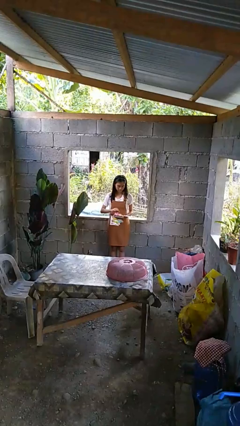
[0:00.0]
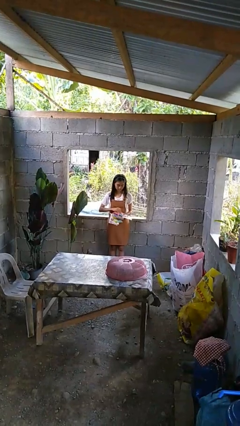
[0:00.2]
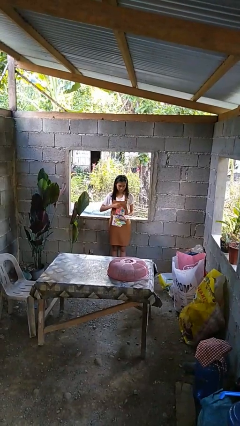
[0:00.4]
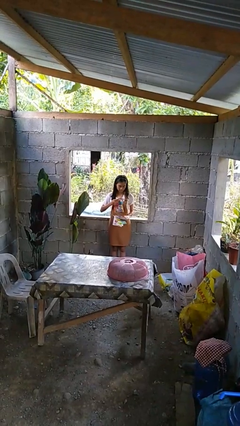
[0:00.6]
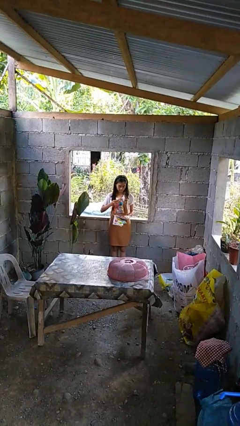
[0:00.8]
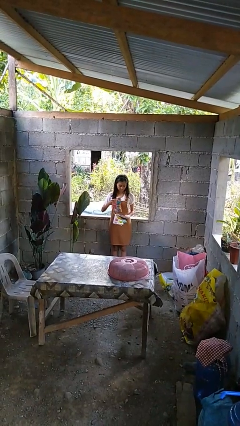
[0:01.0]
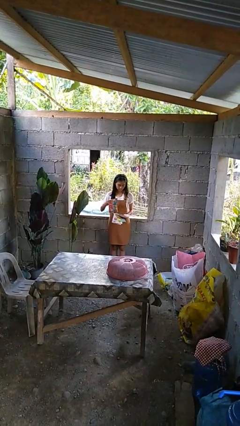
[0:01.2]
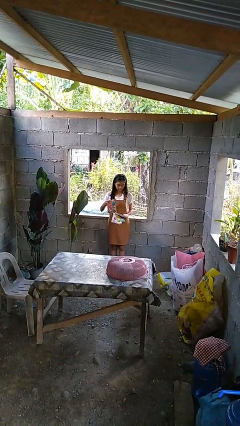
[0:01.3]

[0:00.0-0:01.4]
person tears paper

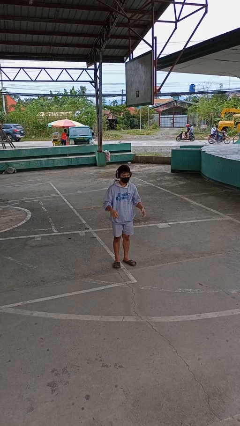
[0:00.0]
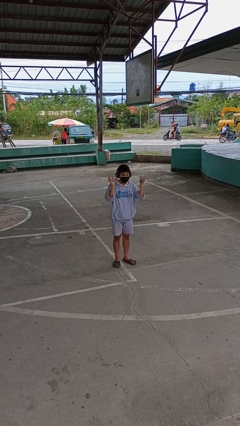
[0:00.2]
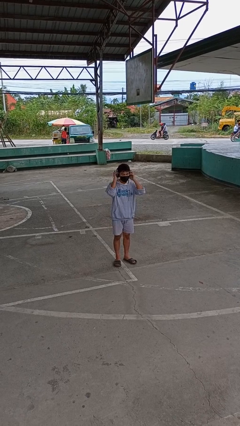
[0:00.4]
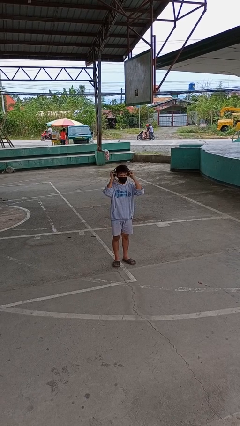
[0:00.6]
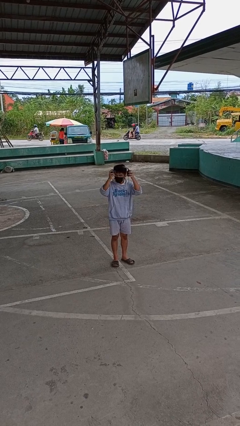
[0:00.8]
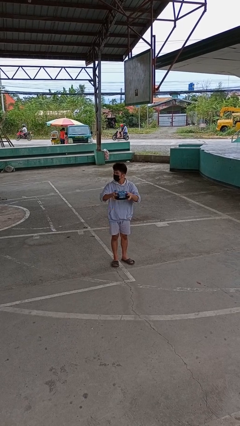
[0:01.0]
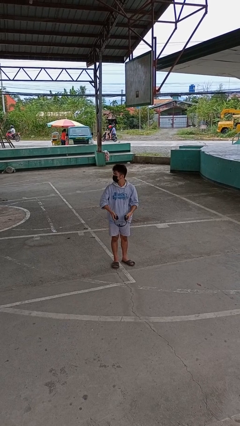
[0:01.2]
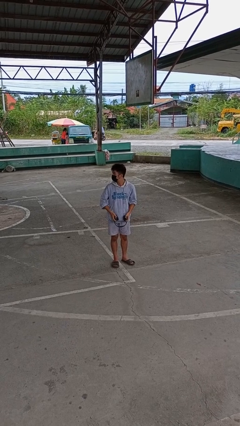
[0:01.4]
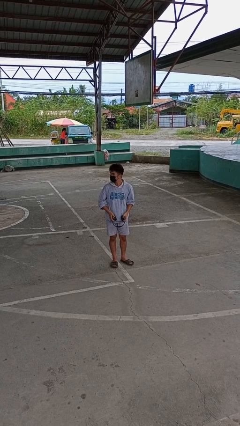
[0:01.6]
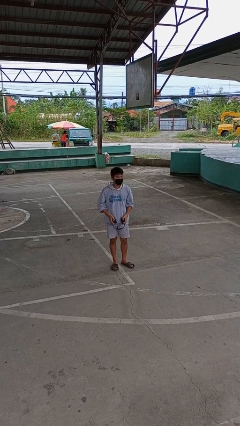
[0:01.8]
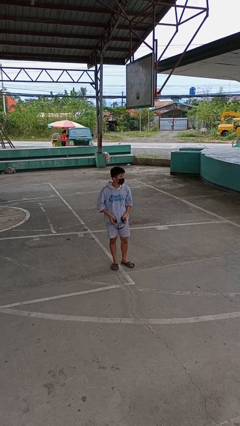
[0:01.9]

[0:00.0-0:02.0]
person takes off headphones

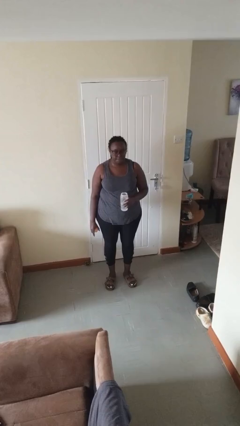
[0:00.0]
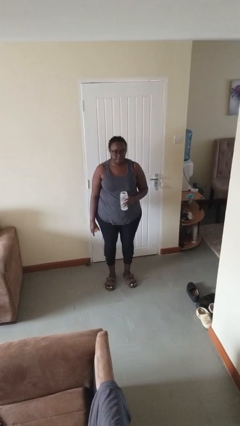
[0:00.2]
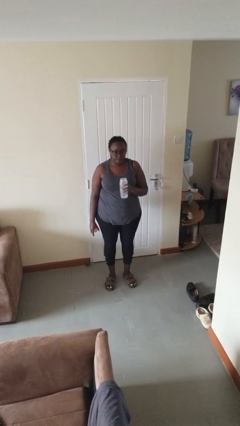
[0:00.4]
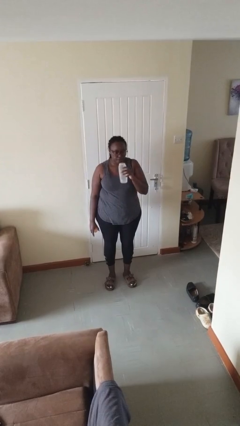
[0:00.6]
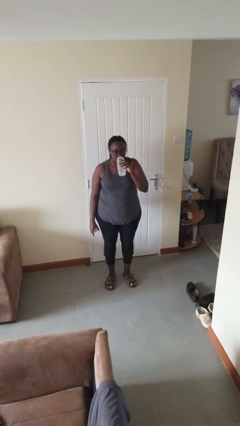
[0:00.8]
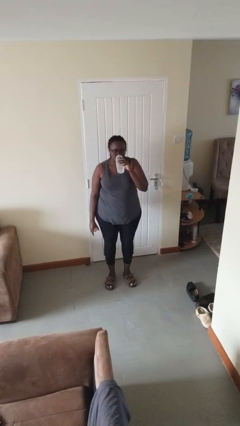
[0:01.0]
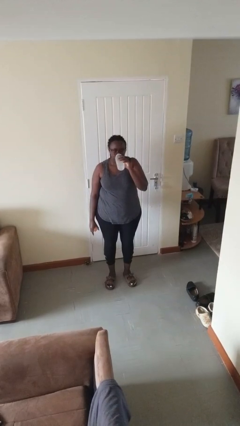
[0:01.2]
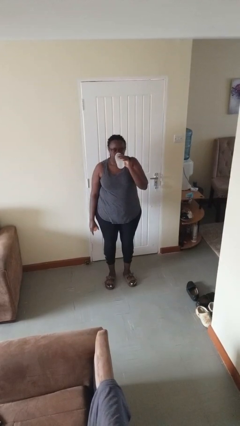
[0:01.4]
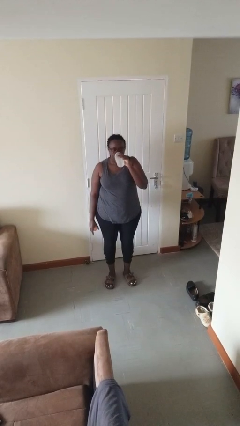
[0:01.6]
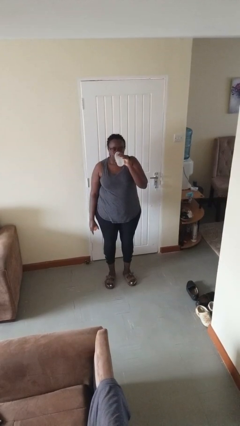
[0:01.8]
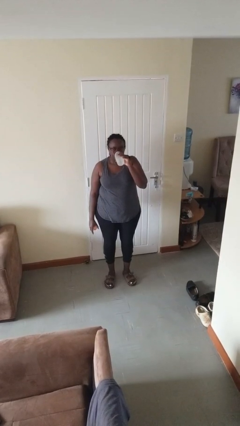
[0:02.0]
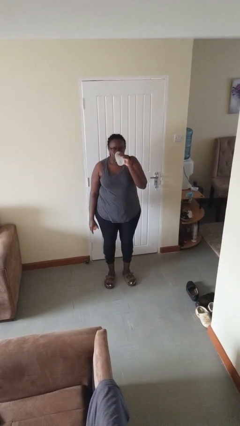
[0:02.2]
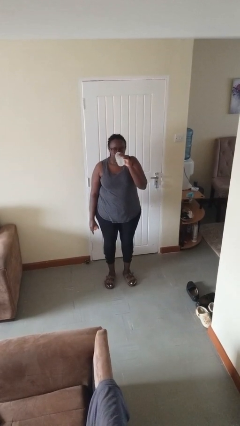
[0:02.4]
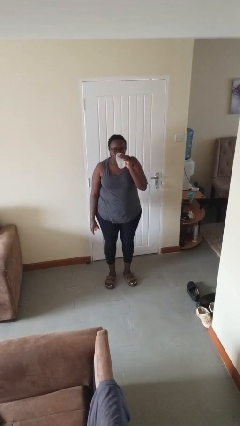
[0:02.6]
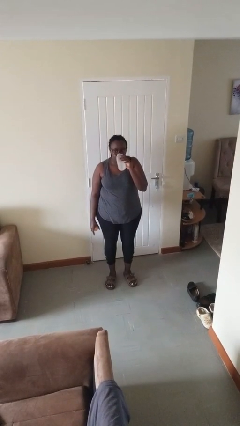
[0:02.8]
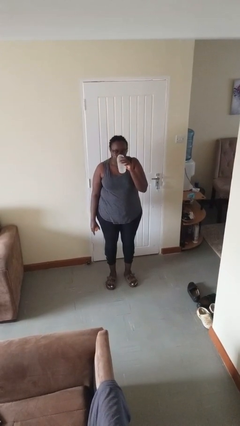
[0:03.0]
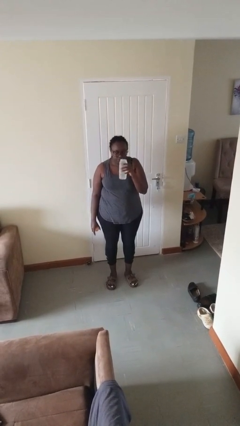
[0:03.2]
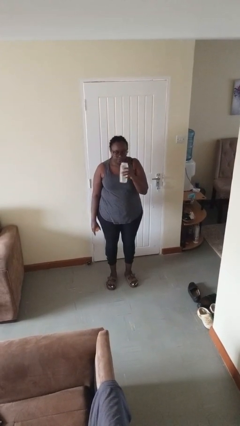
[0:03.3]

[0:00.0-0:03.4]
person drinks from bottle

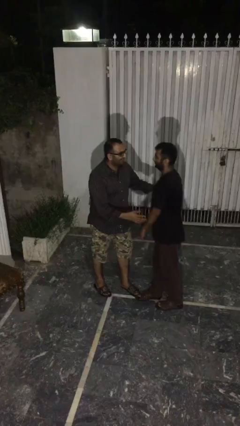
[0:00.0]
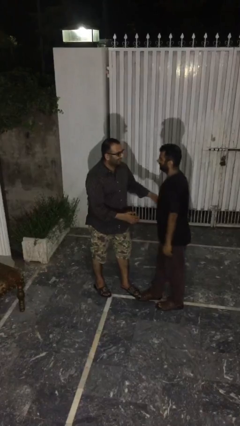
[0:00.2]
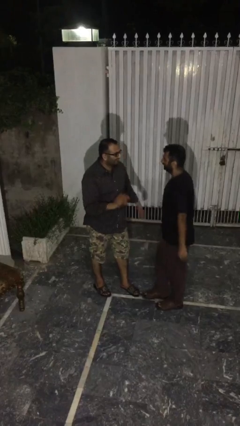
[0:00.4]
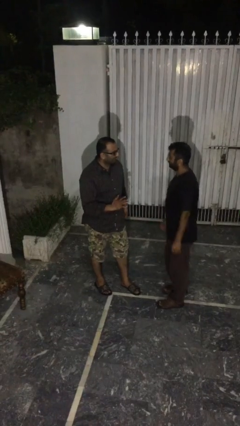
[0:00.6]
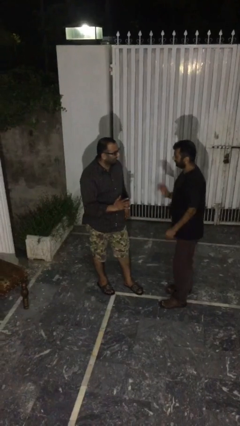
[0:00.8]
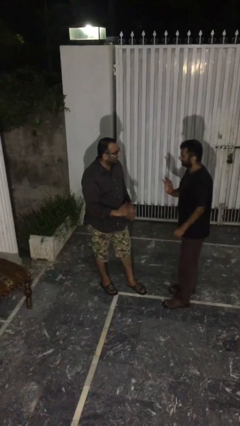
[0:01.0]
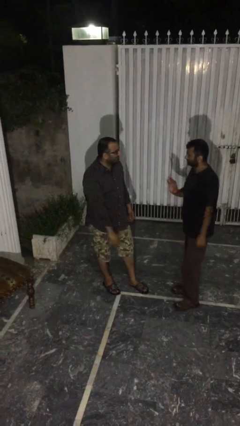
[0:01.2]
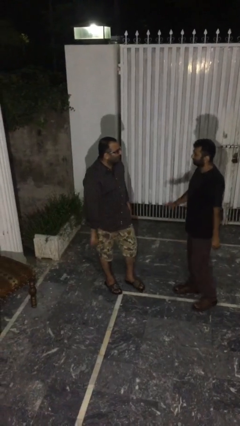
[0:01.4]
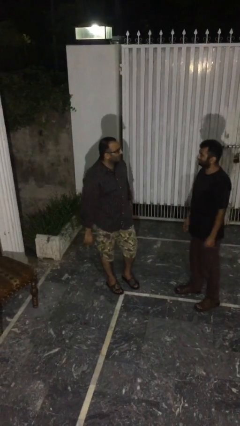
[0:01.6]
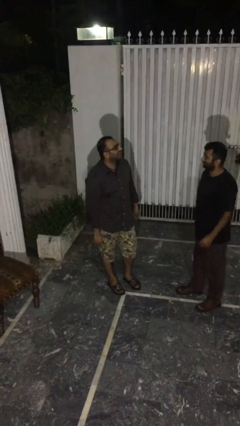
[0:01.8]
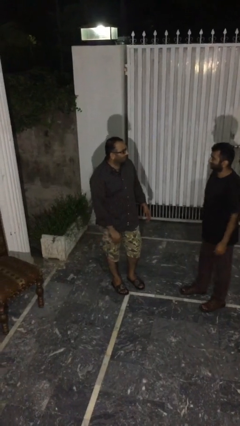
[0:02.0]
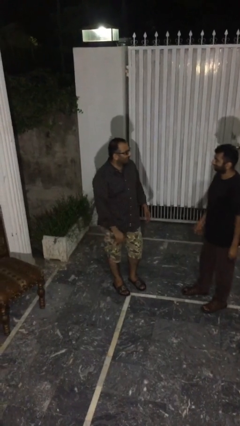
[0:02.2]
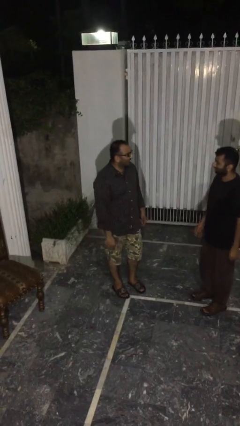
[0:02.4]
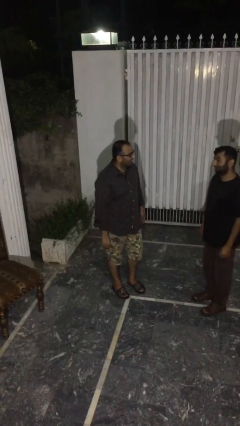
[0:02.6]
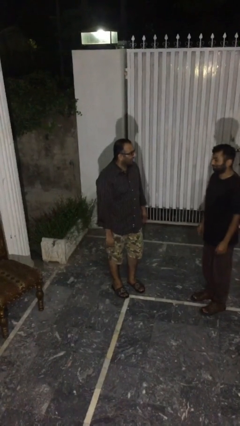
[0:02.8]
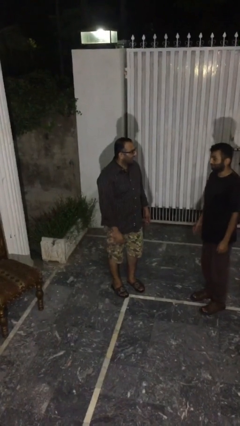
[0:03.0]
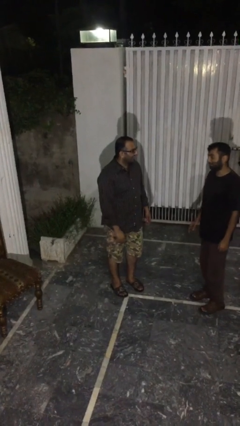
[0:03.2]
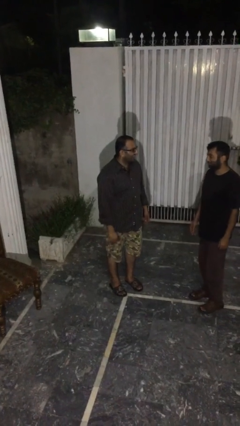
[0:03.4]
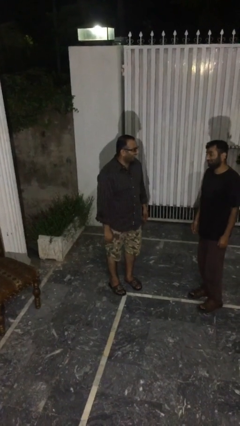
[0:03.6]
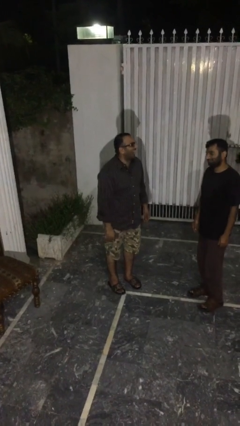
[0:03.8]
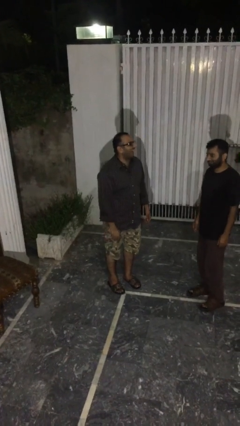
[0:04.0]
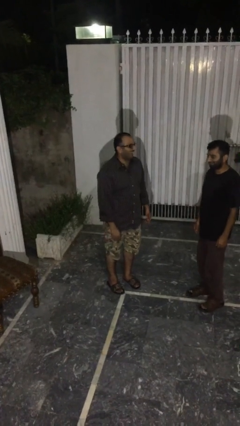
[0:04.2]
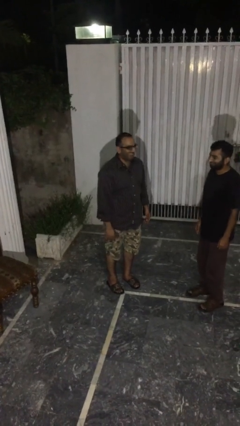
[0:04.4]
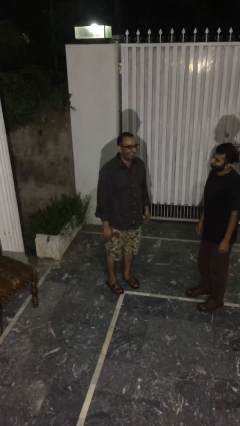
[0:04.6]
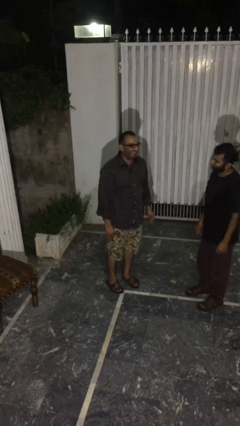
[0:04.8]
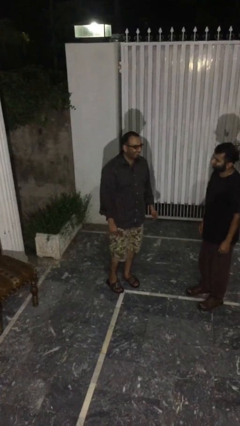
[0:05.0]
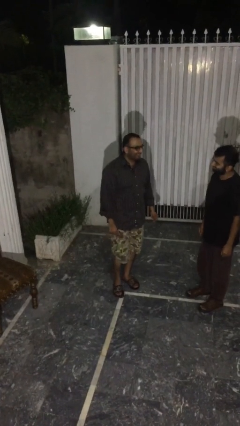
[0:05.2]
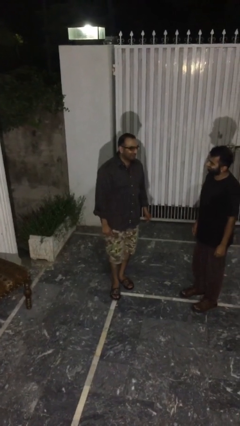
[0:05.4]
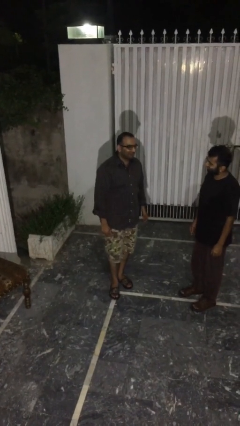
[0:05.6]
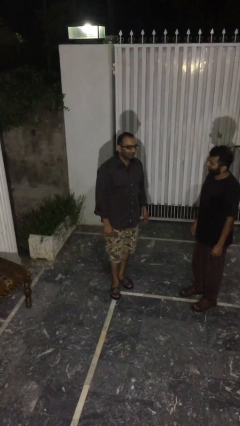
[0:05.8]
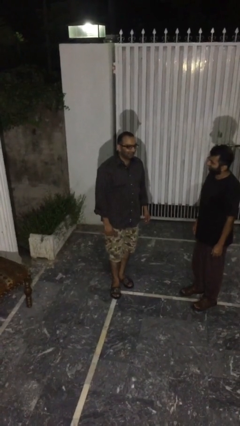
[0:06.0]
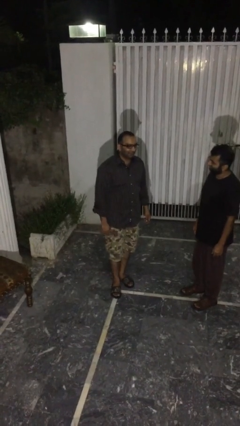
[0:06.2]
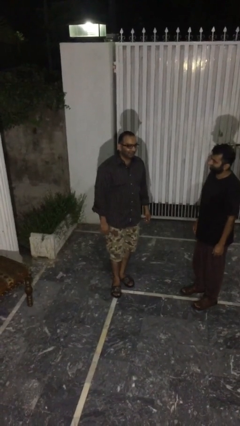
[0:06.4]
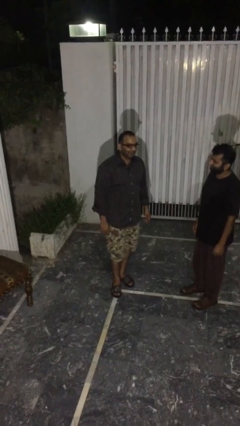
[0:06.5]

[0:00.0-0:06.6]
person talks to person

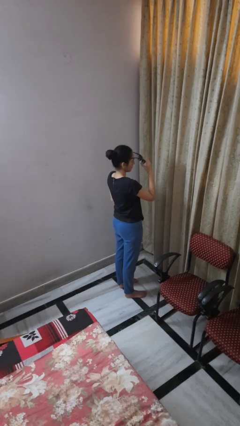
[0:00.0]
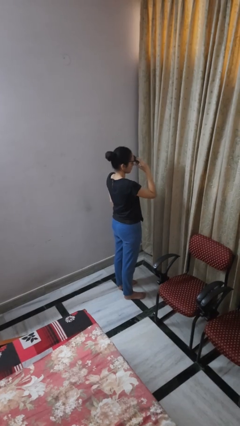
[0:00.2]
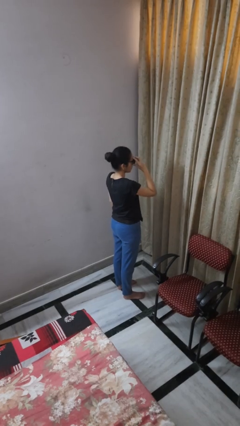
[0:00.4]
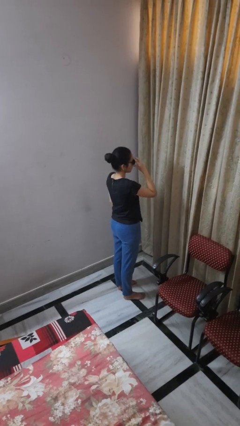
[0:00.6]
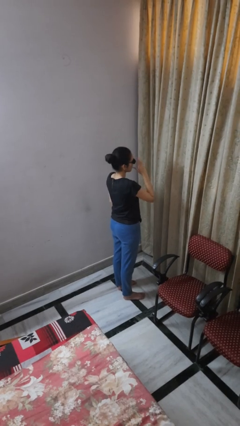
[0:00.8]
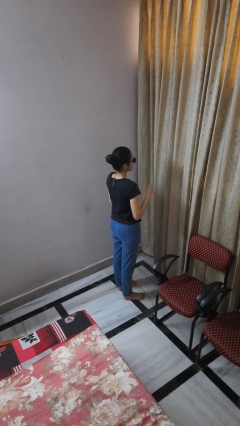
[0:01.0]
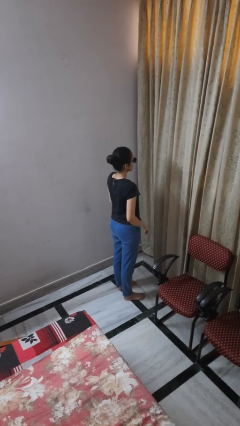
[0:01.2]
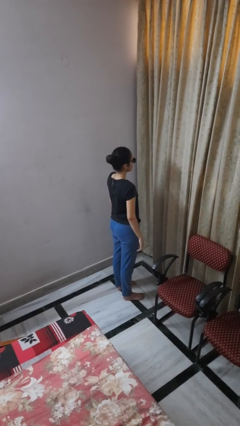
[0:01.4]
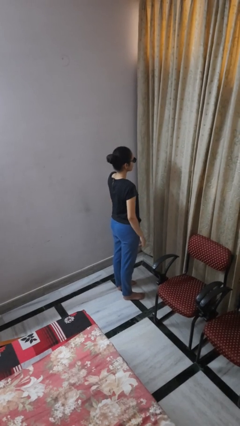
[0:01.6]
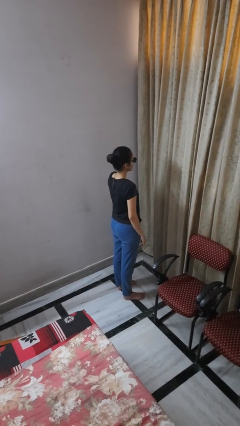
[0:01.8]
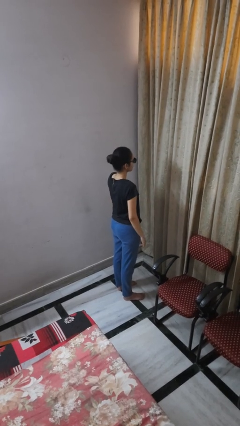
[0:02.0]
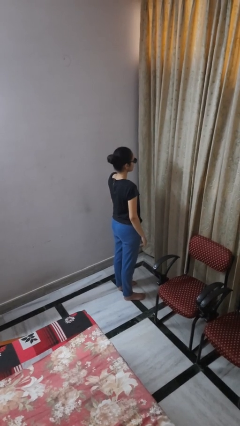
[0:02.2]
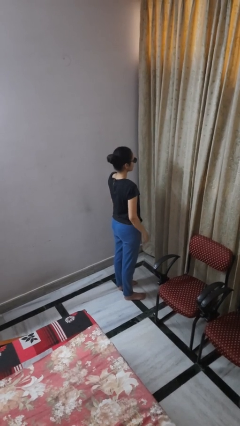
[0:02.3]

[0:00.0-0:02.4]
person puts on sunglasses

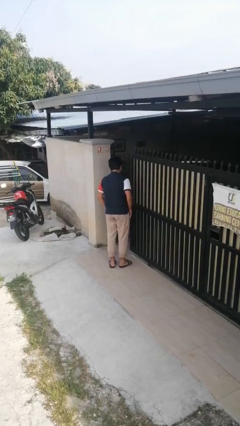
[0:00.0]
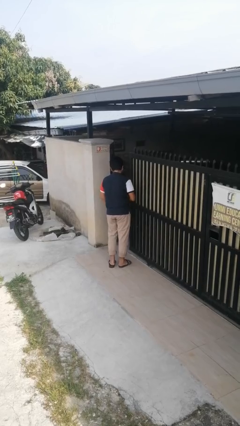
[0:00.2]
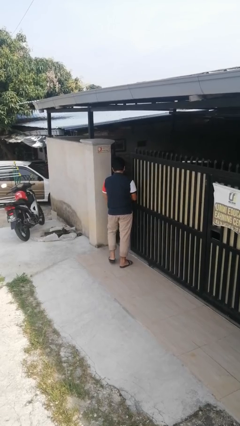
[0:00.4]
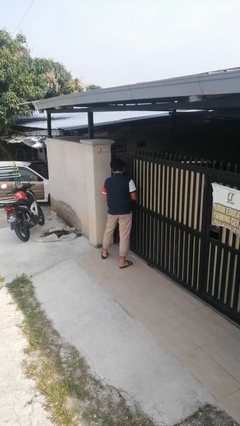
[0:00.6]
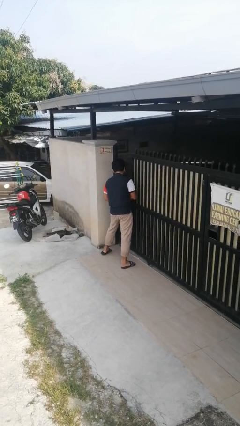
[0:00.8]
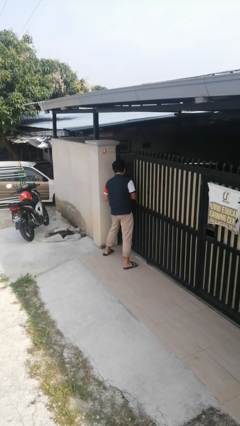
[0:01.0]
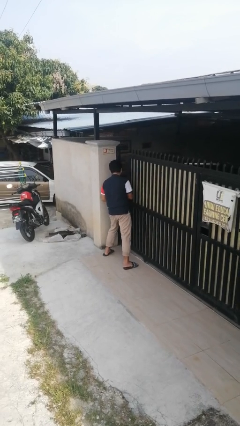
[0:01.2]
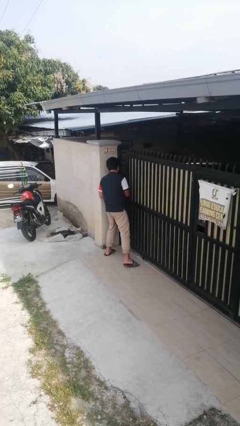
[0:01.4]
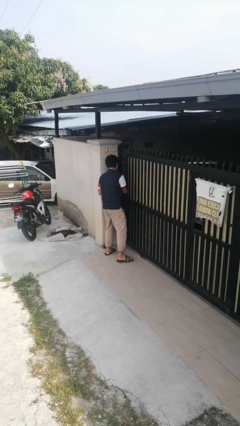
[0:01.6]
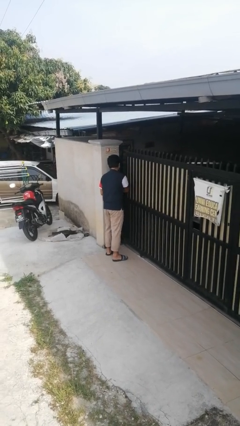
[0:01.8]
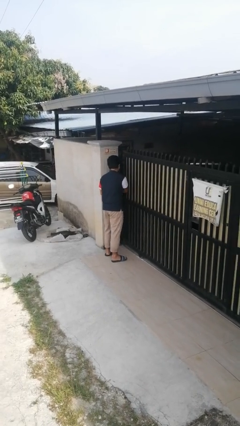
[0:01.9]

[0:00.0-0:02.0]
person closes sliding door
